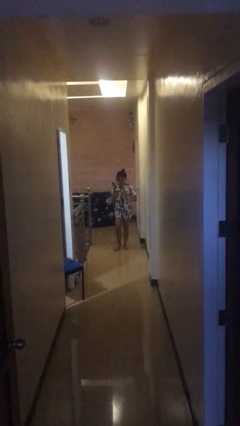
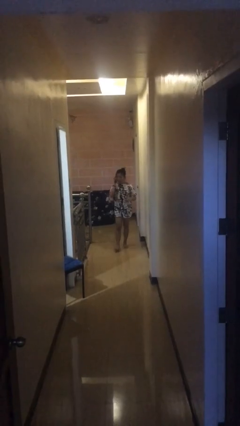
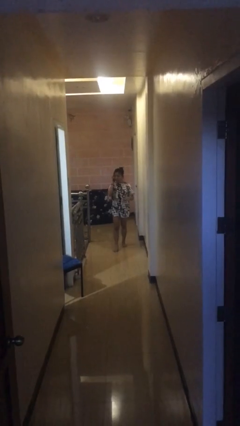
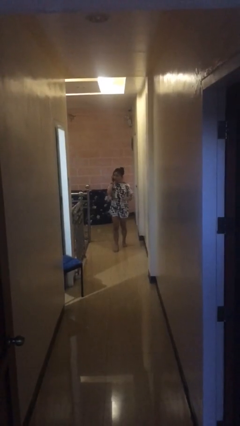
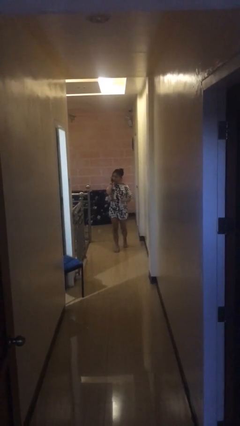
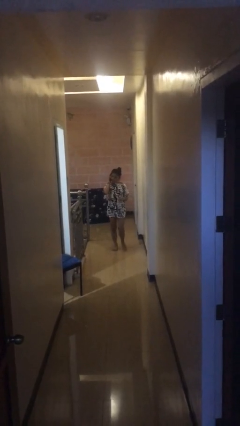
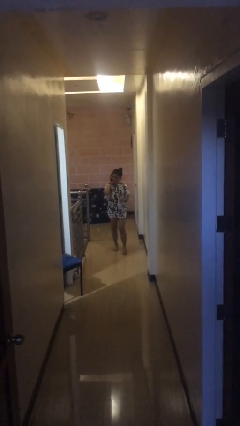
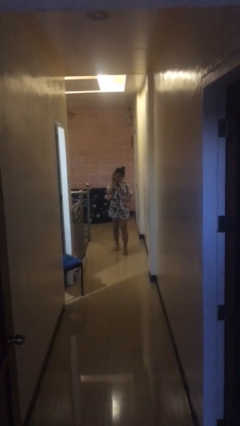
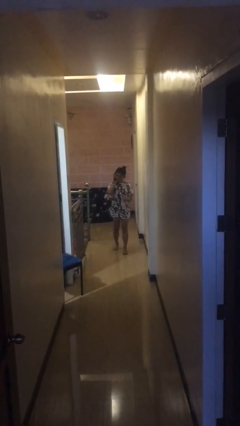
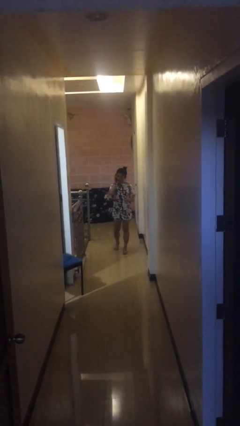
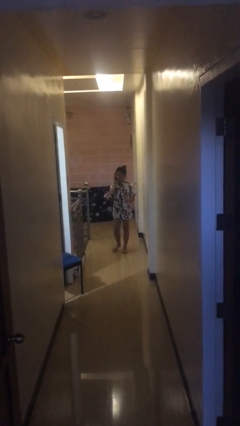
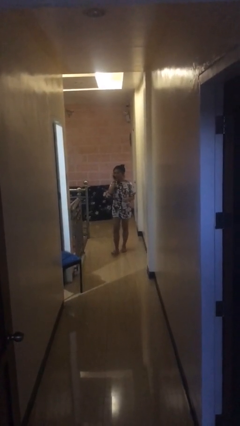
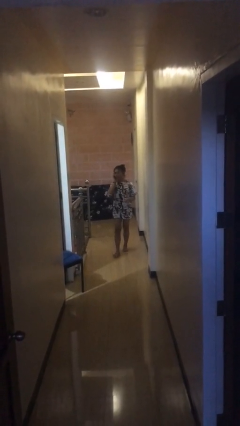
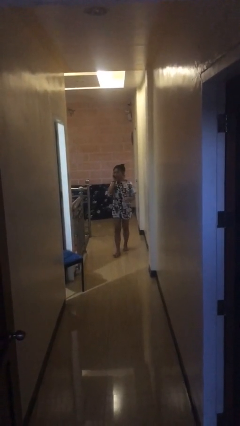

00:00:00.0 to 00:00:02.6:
person talks on phone

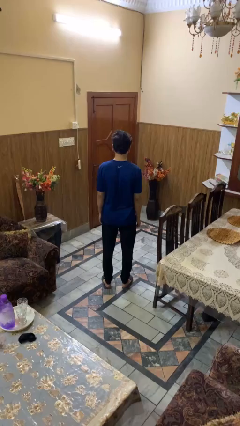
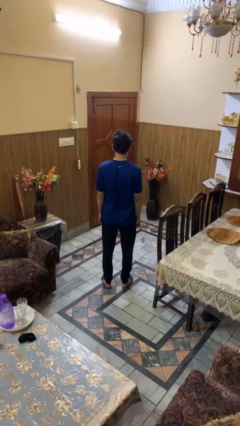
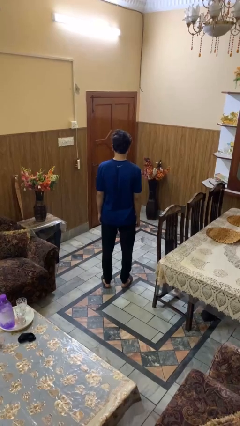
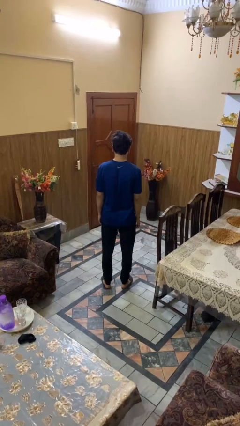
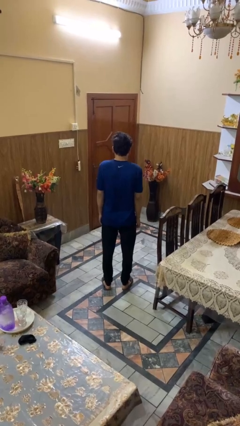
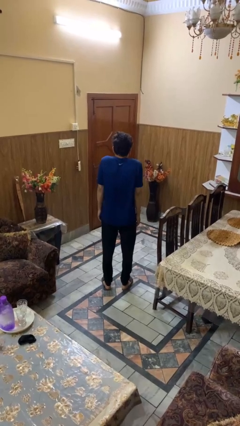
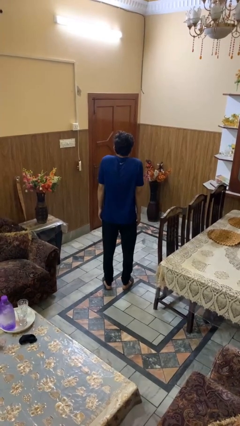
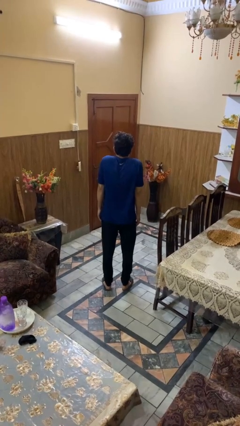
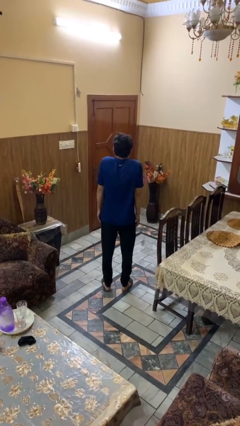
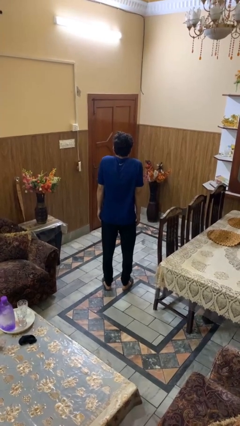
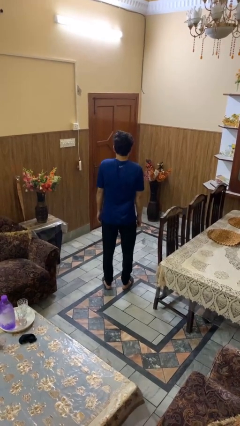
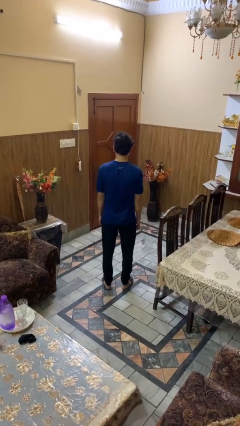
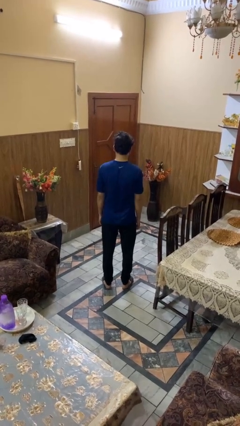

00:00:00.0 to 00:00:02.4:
person shrugs

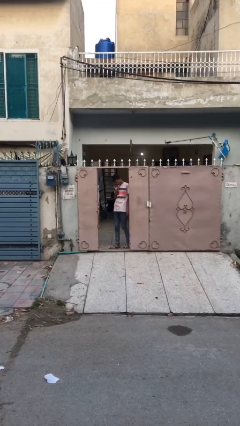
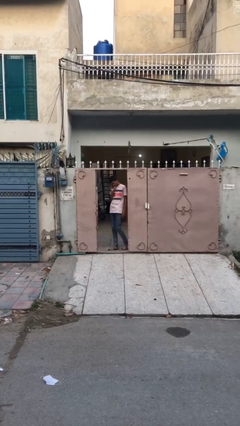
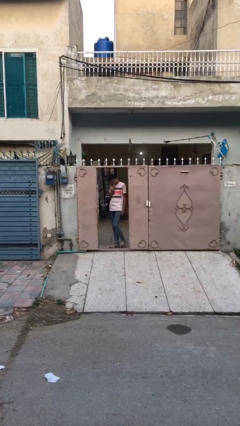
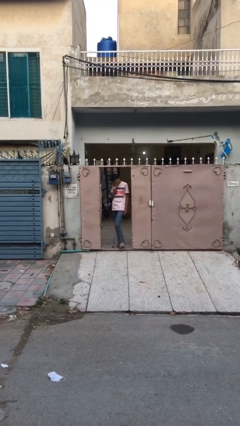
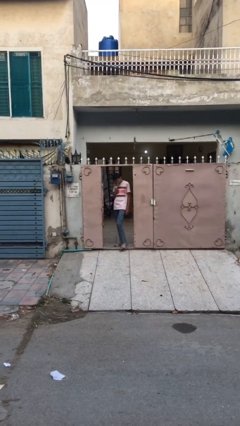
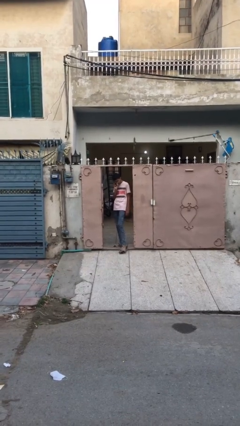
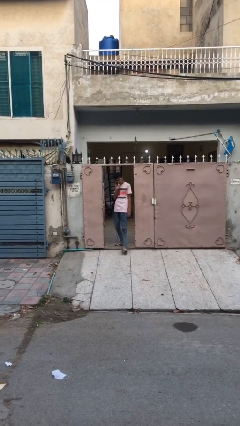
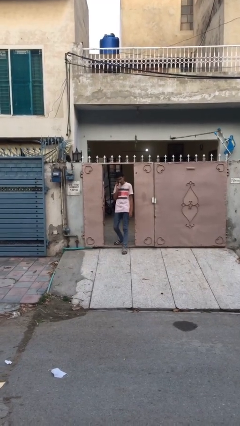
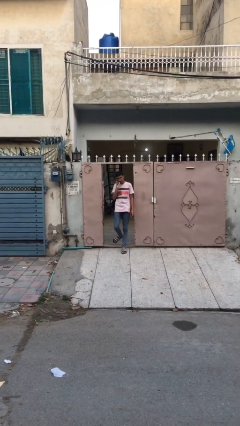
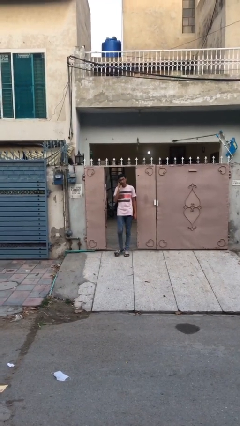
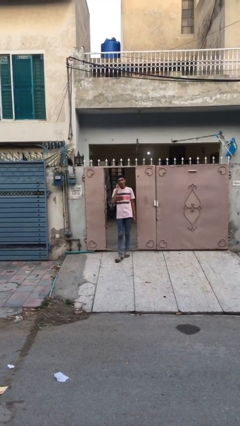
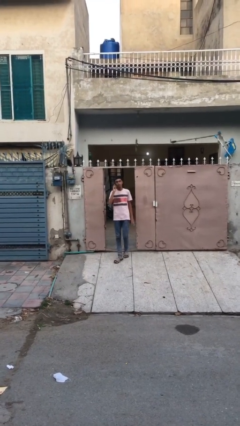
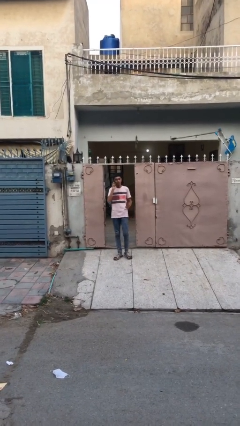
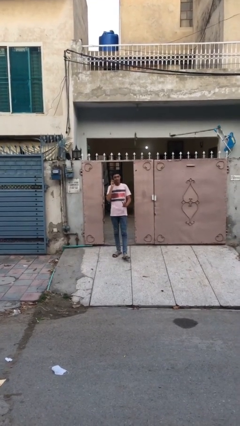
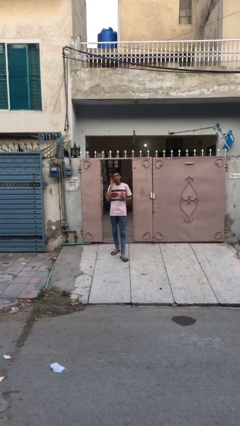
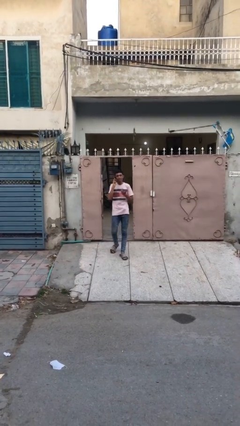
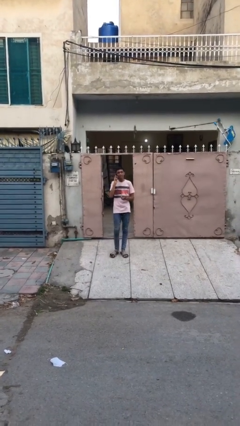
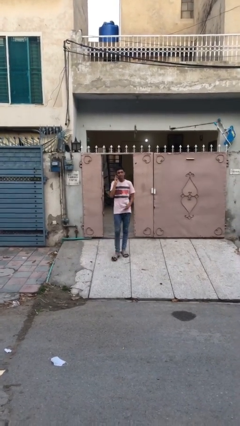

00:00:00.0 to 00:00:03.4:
person enters scene through structure

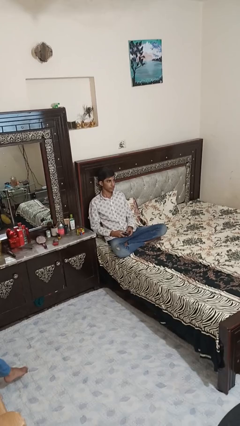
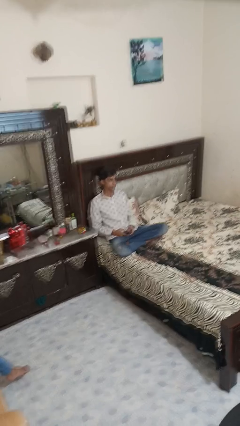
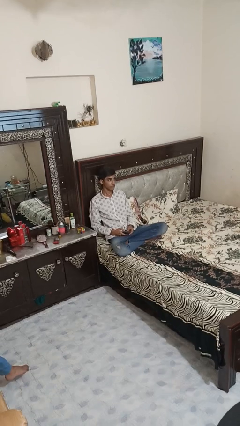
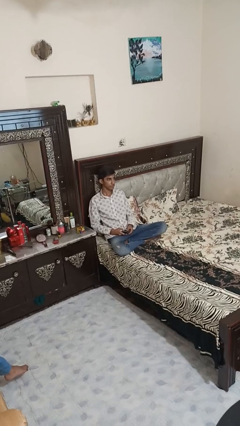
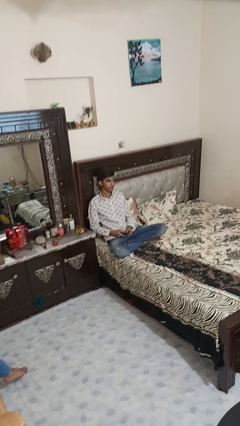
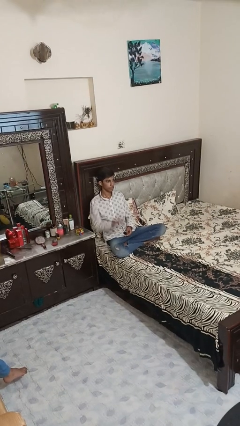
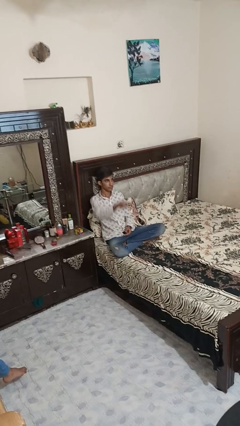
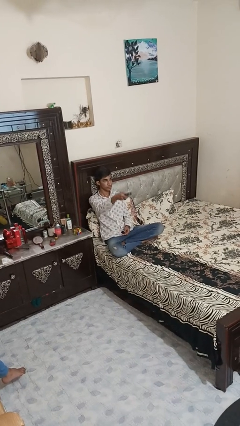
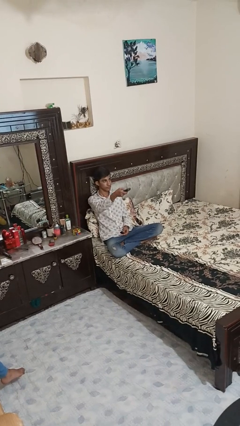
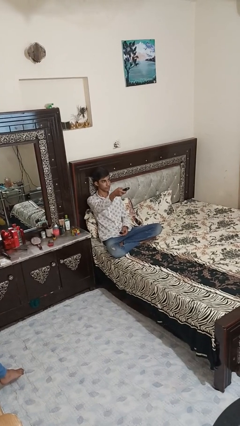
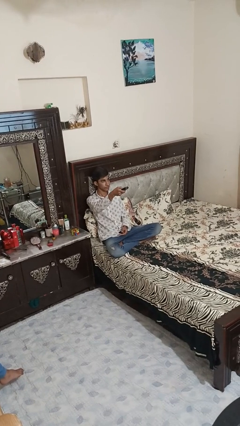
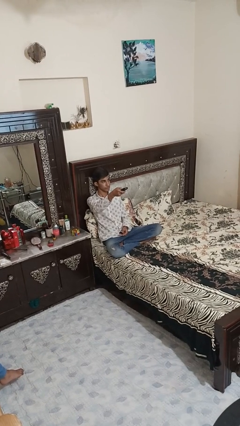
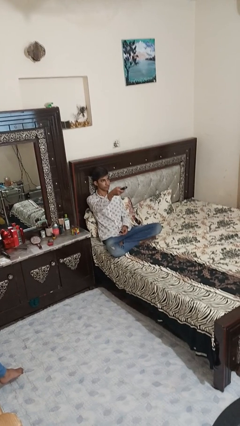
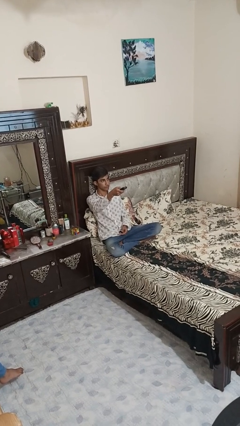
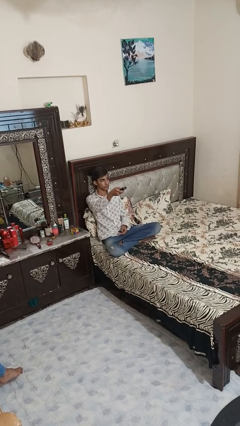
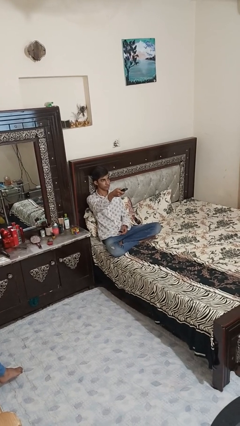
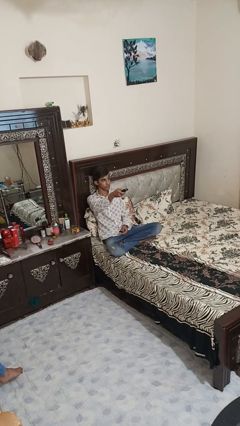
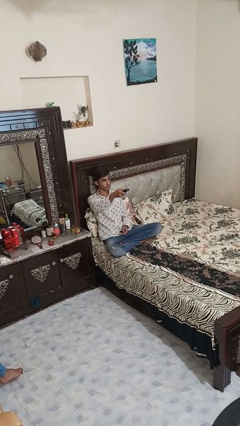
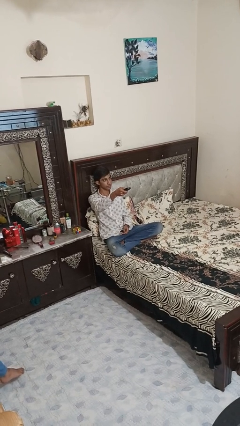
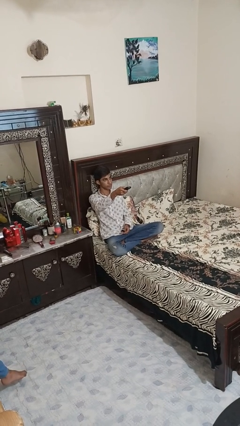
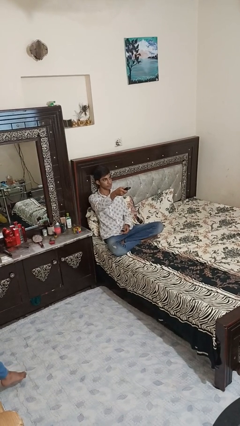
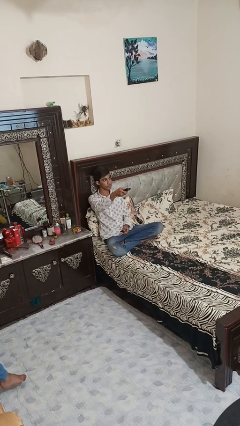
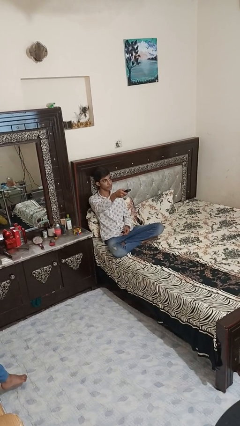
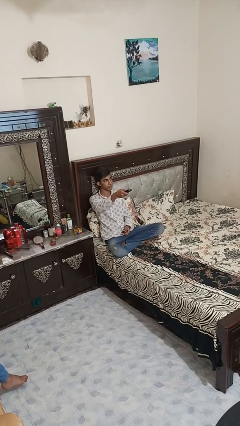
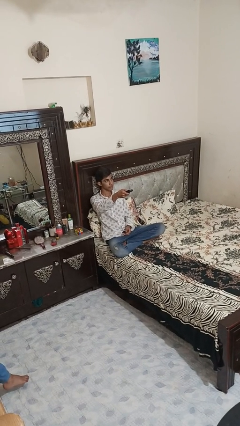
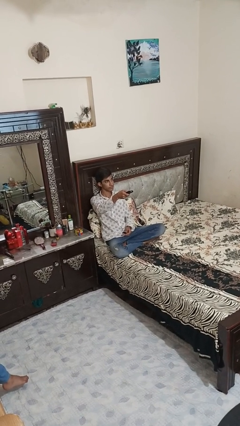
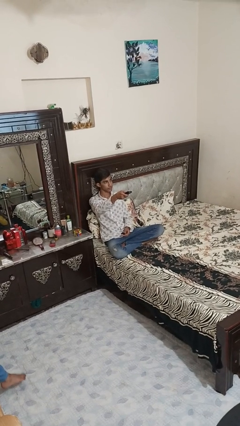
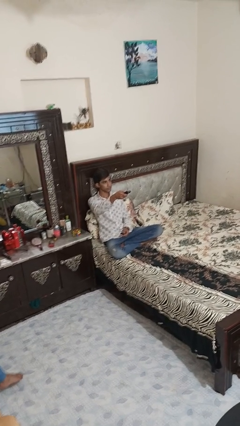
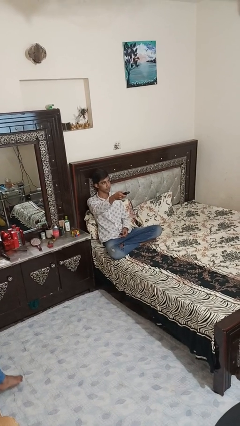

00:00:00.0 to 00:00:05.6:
person uses television remote

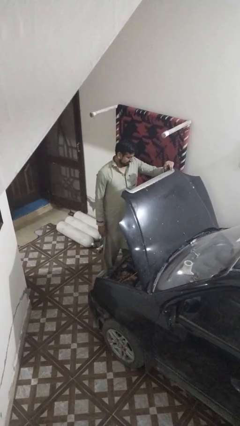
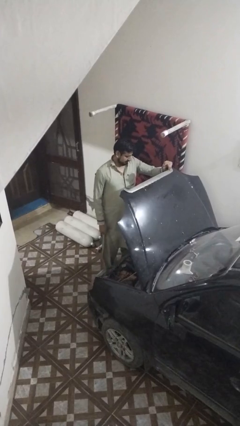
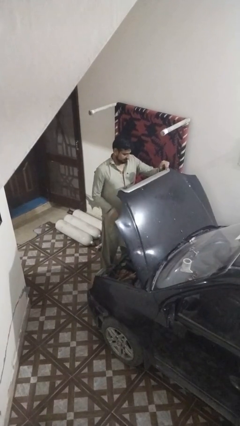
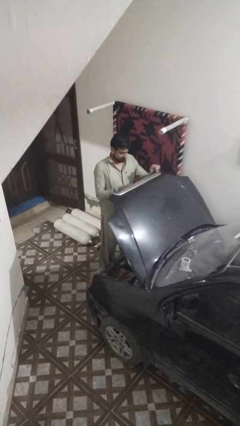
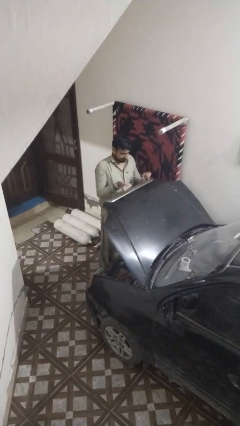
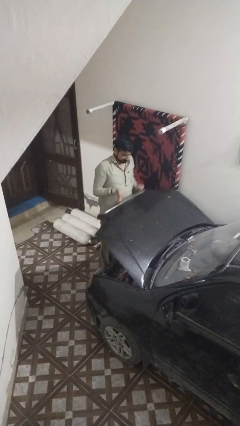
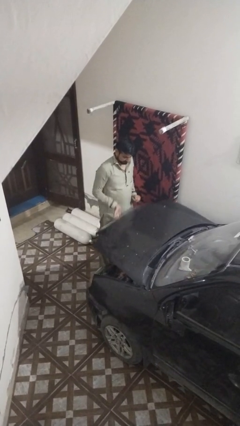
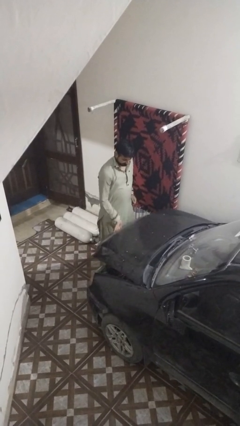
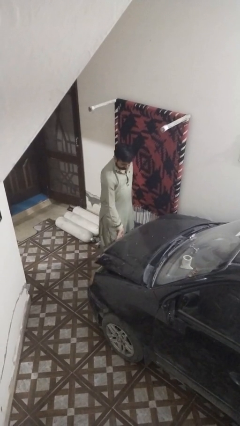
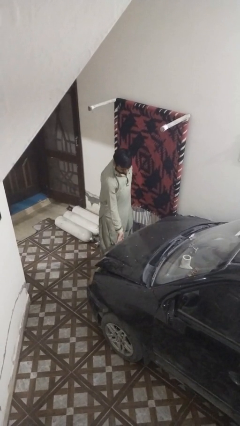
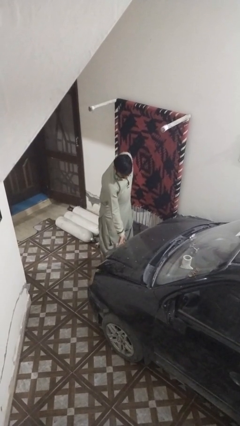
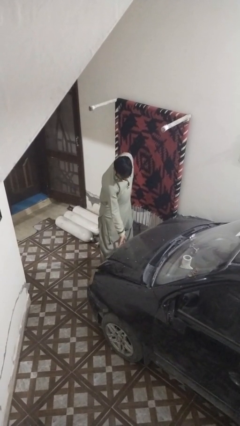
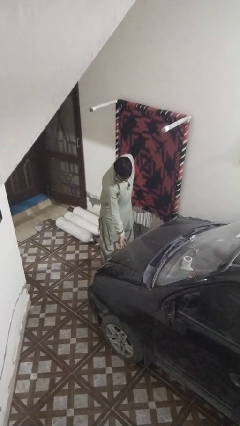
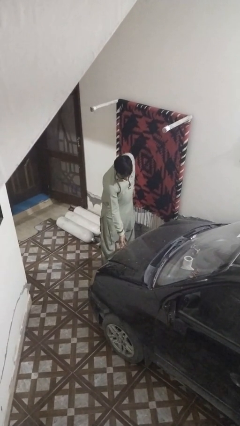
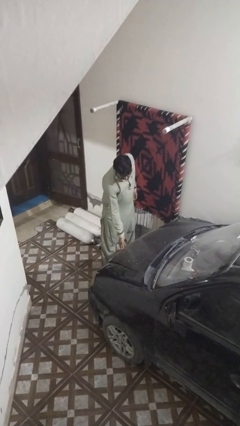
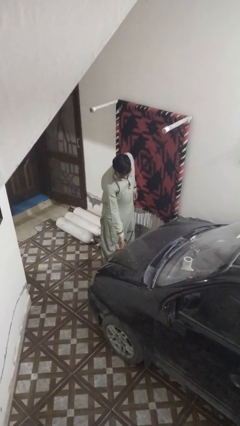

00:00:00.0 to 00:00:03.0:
person closes car hood

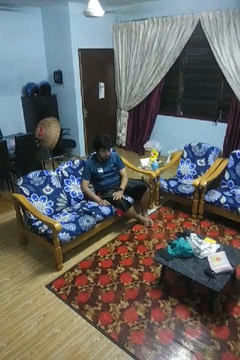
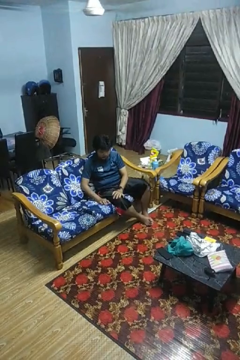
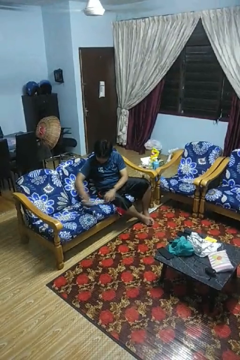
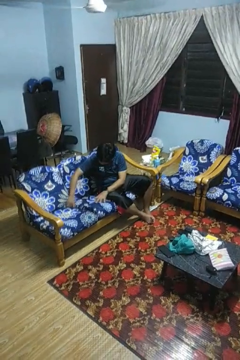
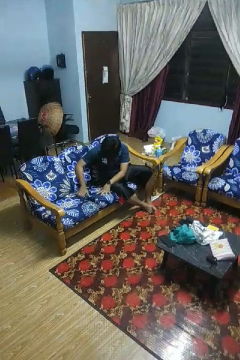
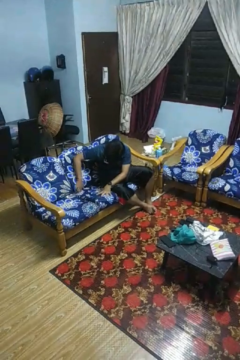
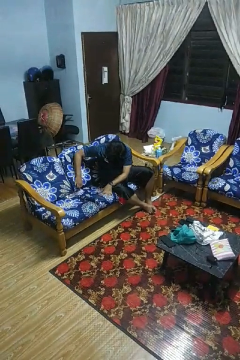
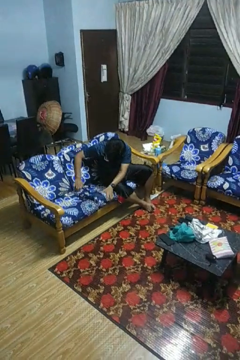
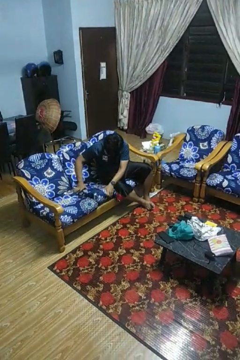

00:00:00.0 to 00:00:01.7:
person searches in couch
